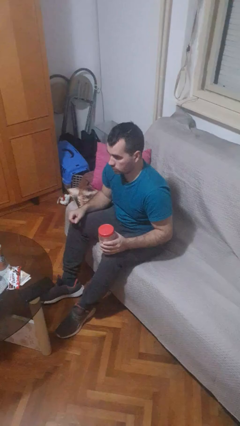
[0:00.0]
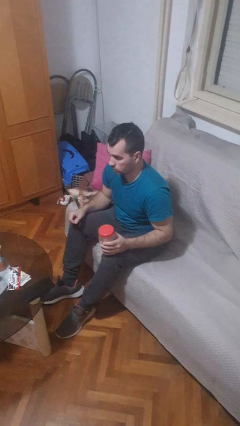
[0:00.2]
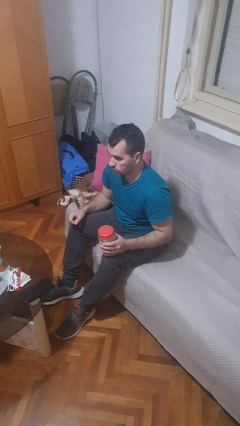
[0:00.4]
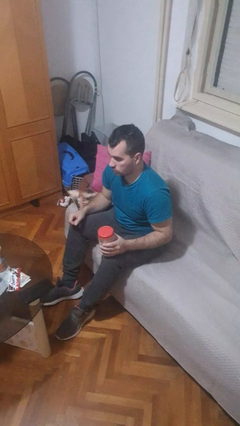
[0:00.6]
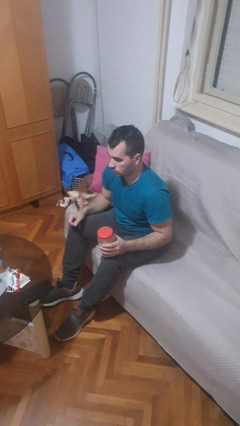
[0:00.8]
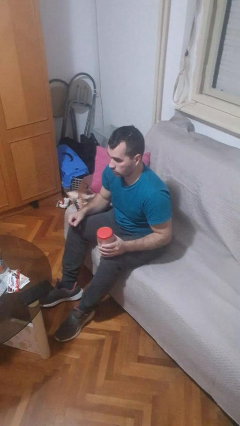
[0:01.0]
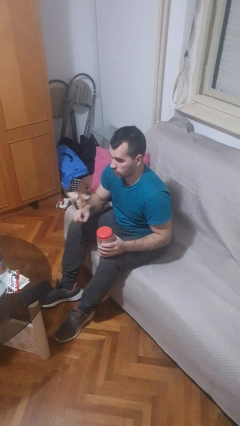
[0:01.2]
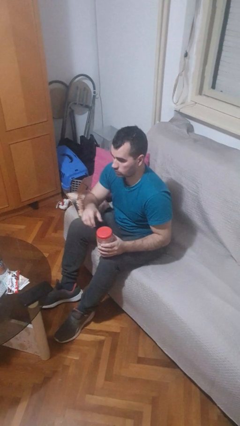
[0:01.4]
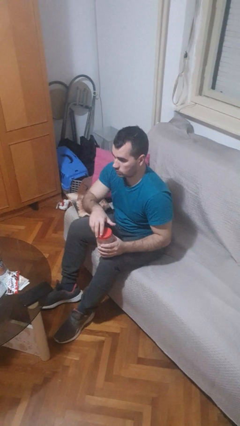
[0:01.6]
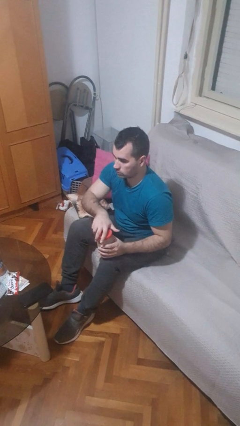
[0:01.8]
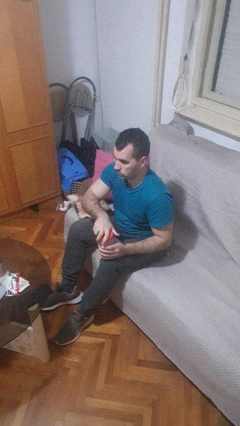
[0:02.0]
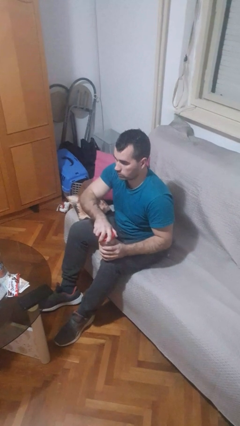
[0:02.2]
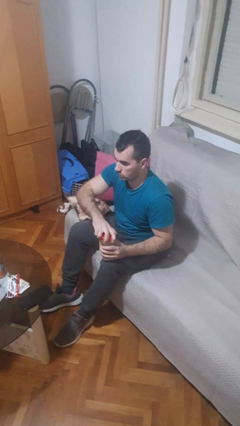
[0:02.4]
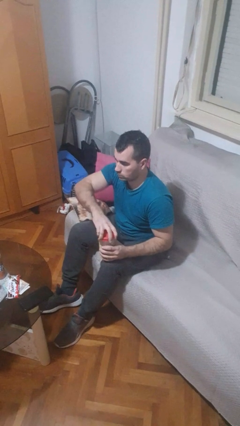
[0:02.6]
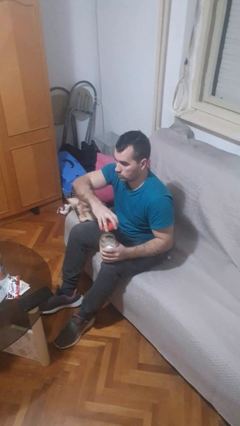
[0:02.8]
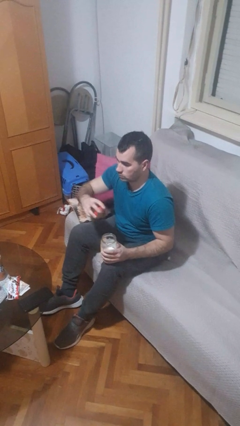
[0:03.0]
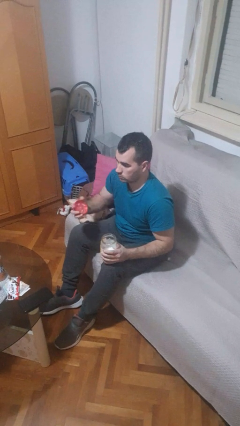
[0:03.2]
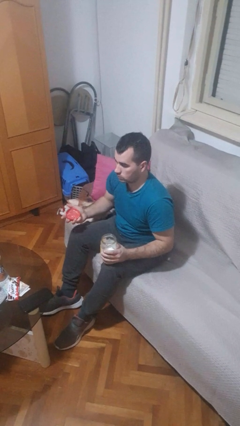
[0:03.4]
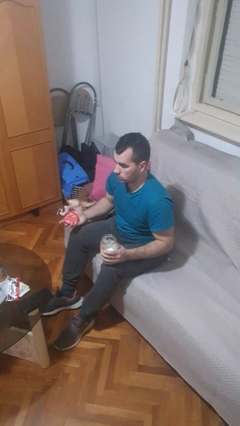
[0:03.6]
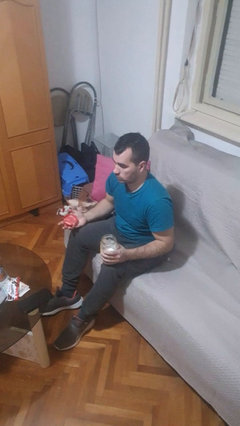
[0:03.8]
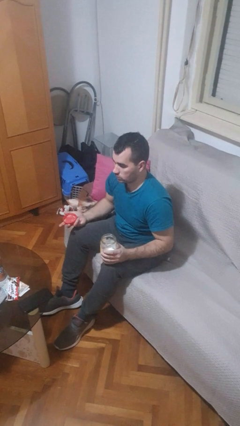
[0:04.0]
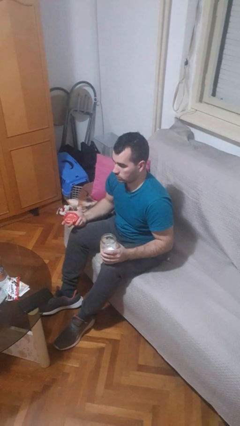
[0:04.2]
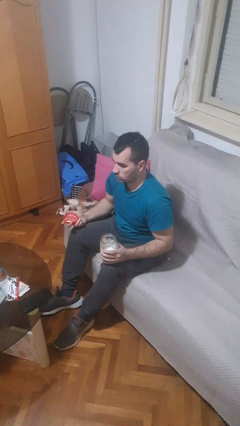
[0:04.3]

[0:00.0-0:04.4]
person opens jar

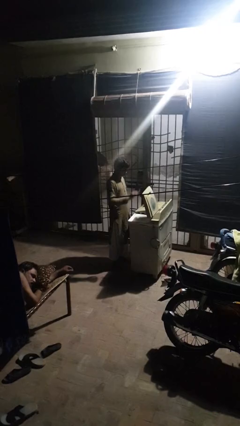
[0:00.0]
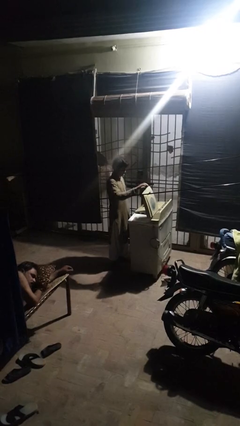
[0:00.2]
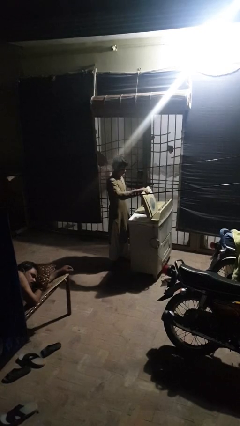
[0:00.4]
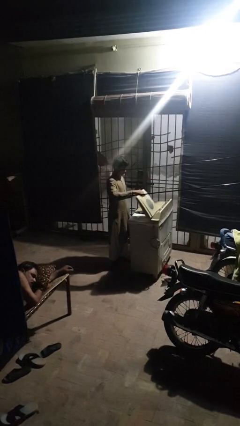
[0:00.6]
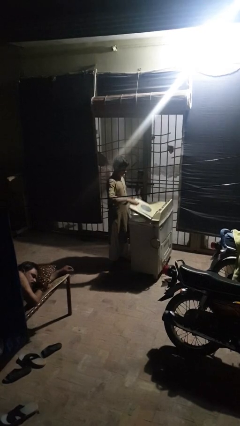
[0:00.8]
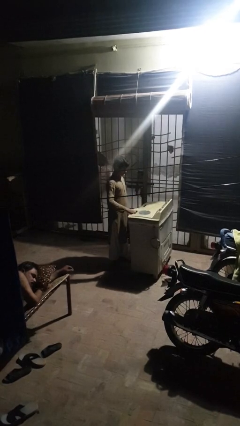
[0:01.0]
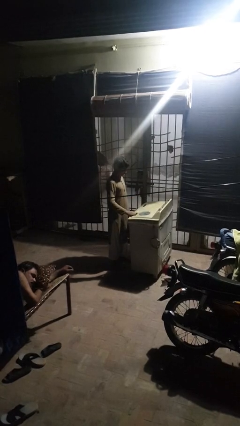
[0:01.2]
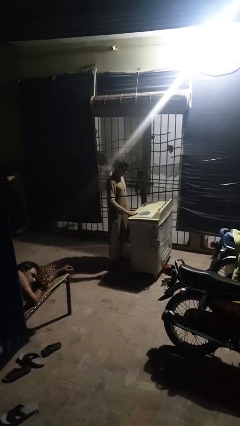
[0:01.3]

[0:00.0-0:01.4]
person closes clothes washer

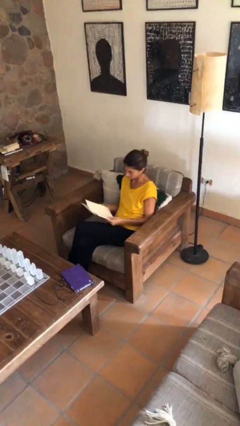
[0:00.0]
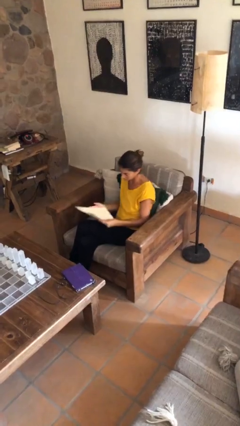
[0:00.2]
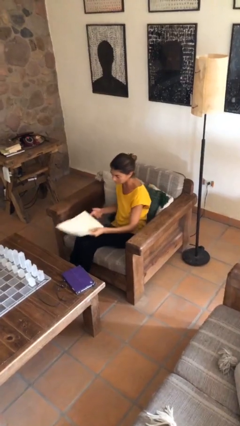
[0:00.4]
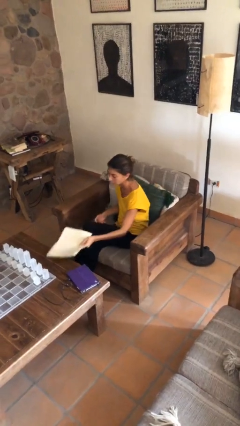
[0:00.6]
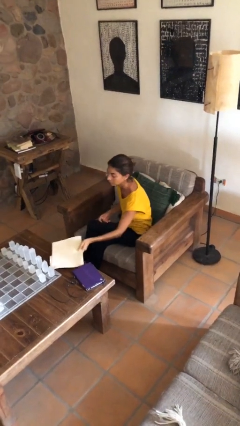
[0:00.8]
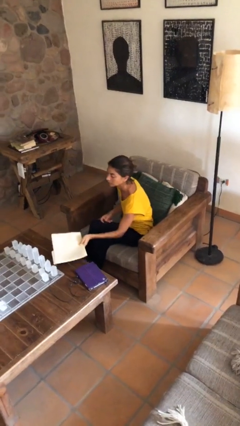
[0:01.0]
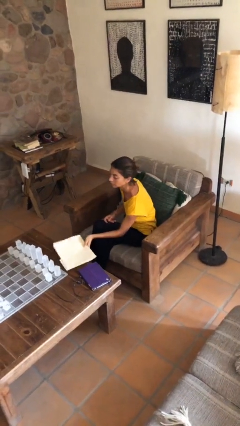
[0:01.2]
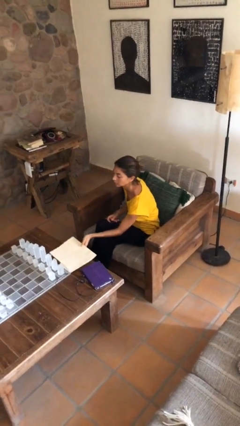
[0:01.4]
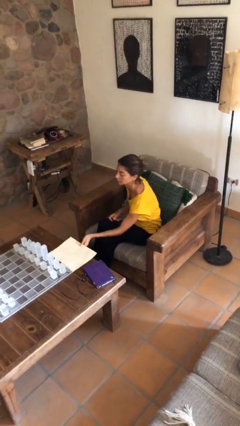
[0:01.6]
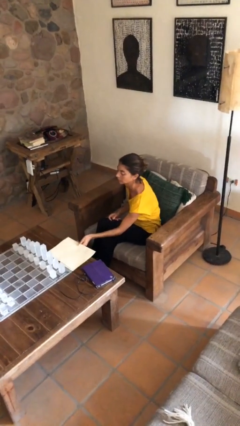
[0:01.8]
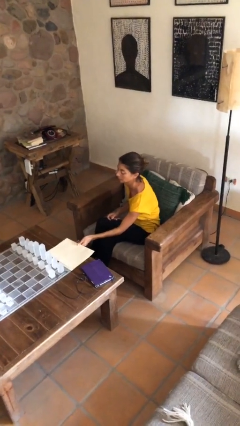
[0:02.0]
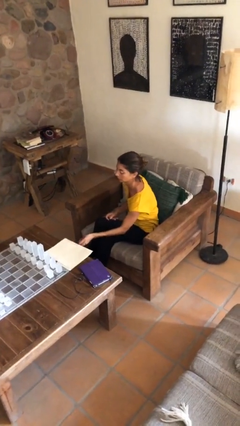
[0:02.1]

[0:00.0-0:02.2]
person puts down object on table

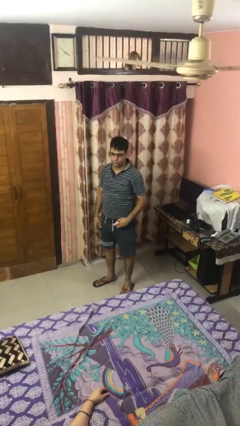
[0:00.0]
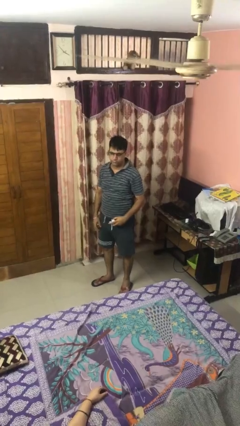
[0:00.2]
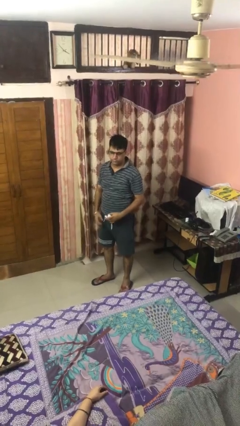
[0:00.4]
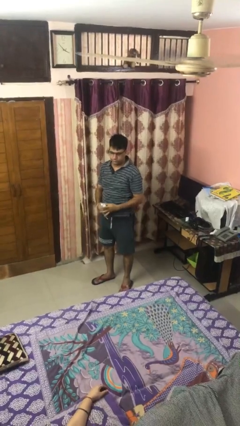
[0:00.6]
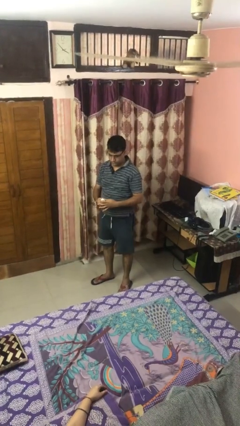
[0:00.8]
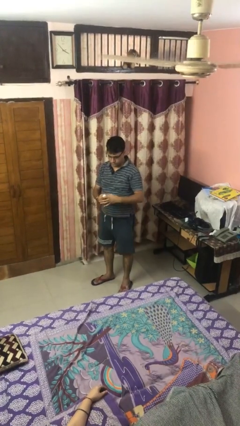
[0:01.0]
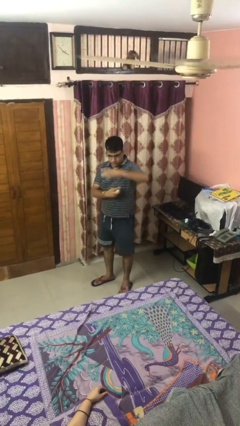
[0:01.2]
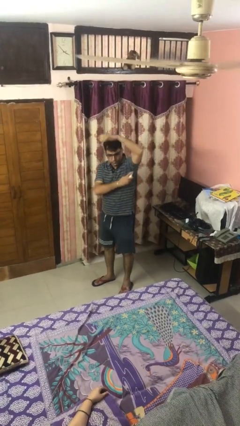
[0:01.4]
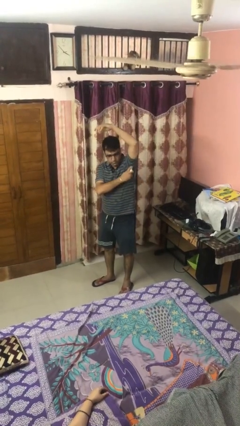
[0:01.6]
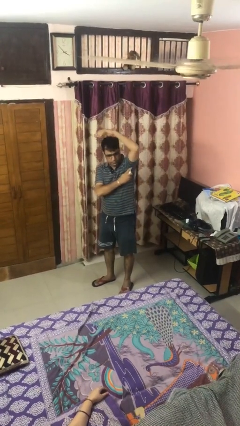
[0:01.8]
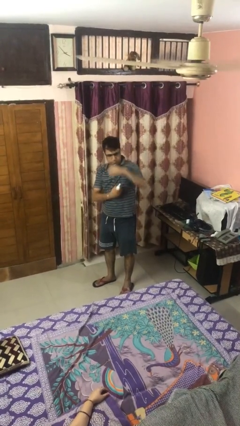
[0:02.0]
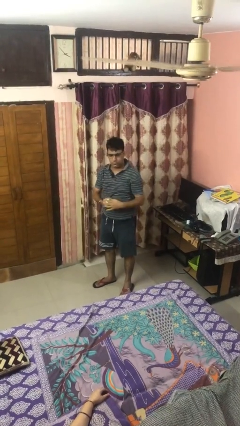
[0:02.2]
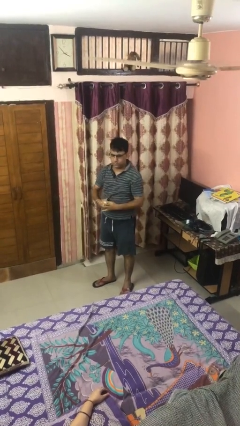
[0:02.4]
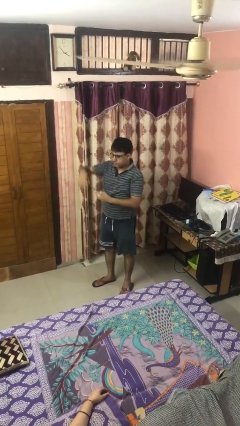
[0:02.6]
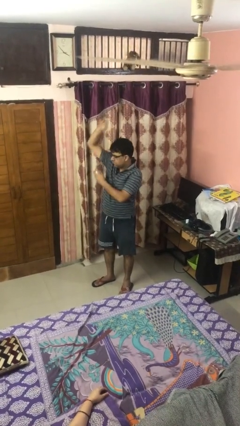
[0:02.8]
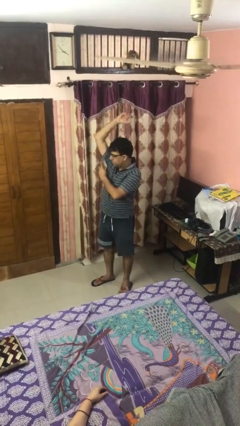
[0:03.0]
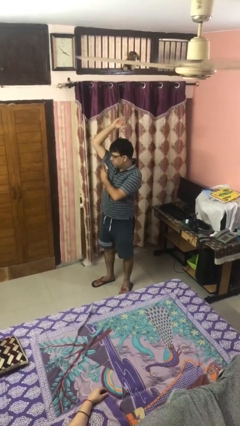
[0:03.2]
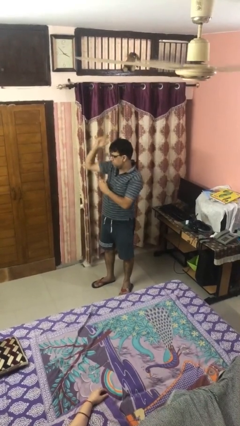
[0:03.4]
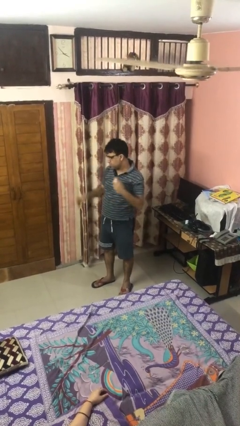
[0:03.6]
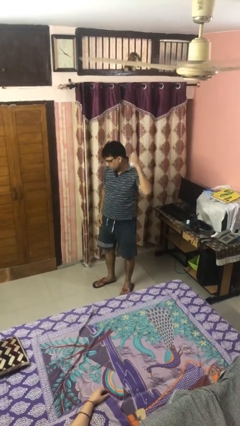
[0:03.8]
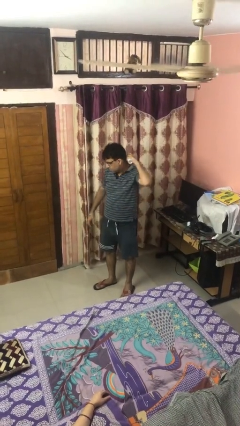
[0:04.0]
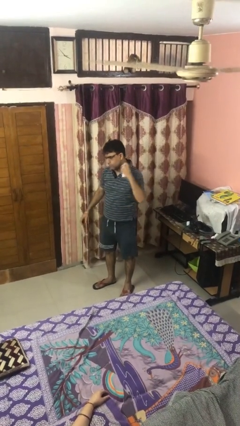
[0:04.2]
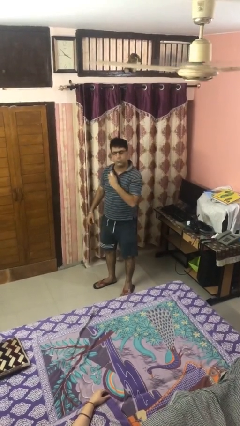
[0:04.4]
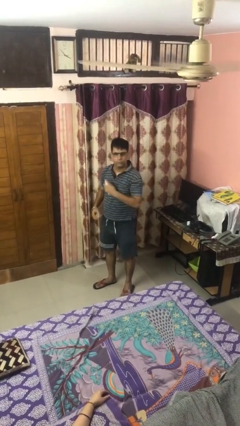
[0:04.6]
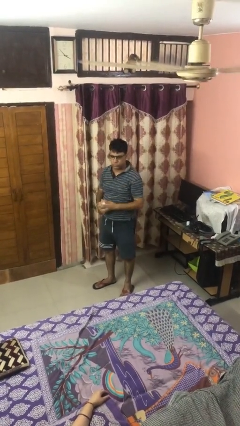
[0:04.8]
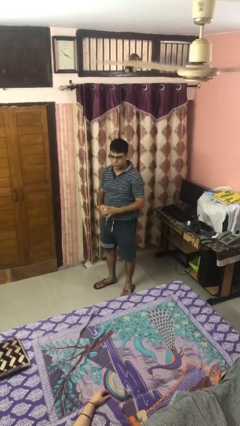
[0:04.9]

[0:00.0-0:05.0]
person applies deodorant

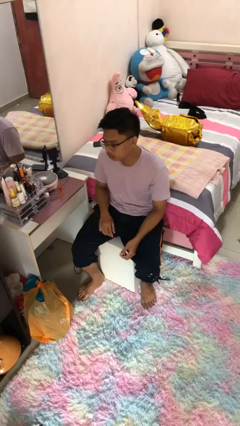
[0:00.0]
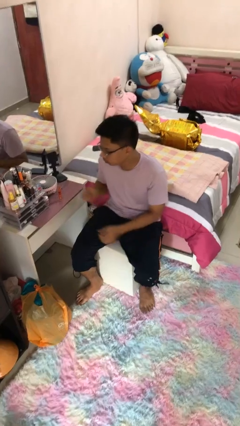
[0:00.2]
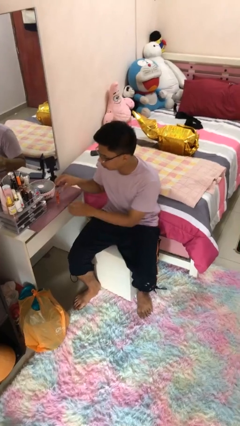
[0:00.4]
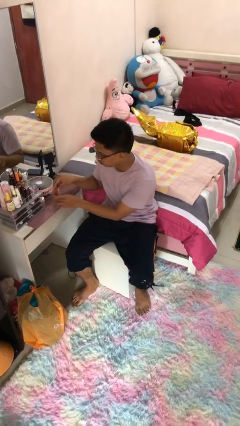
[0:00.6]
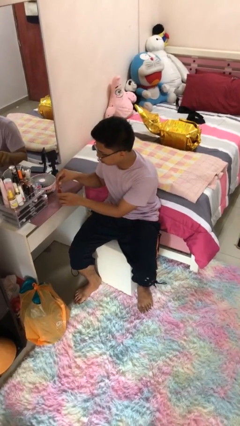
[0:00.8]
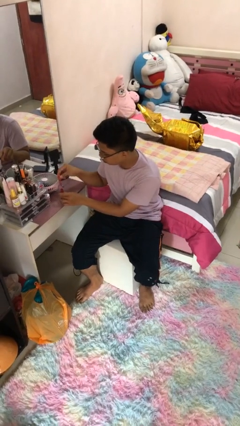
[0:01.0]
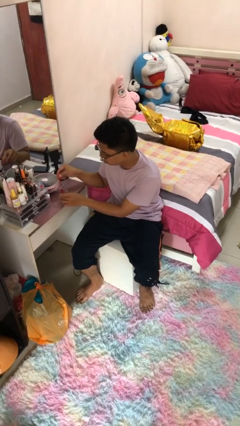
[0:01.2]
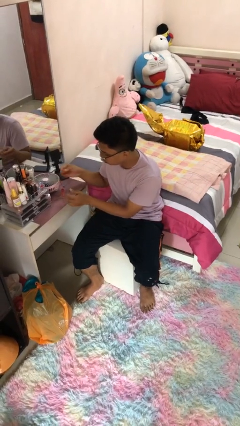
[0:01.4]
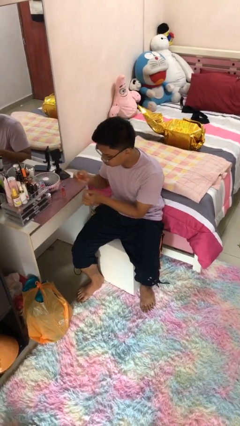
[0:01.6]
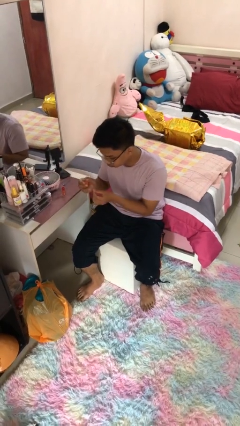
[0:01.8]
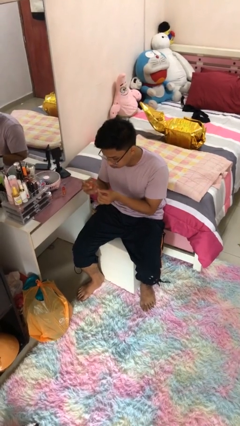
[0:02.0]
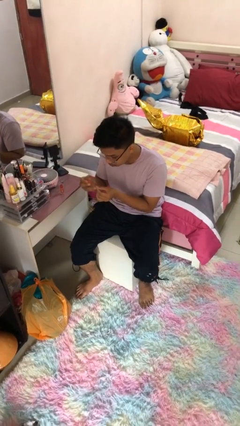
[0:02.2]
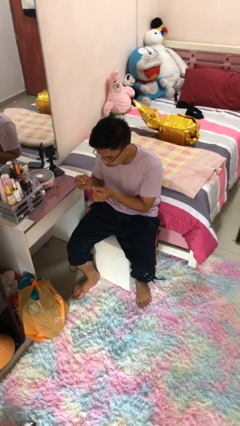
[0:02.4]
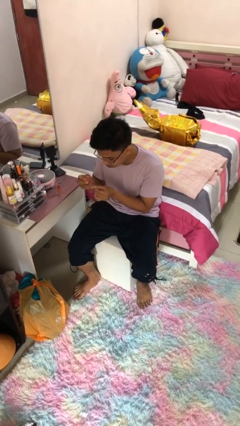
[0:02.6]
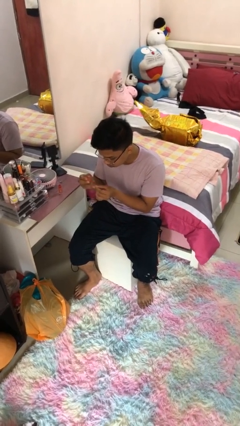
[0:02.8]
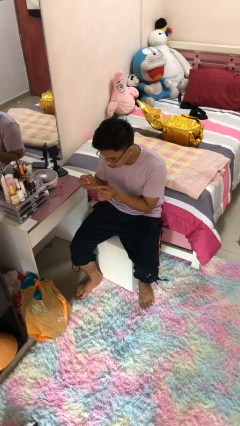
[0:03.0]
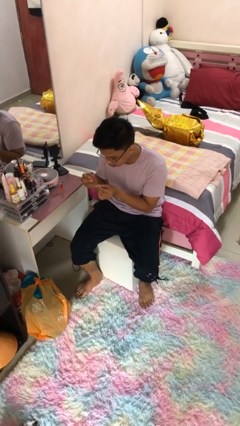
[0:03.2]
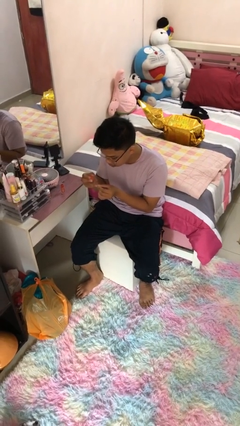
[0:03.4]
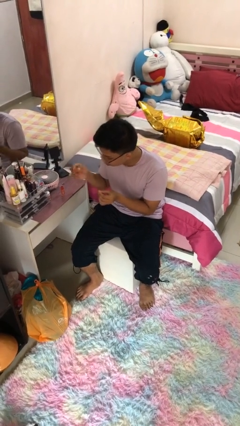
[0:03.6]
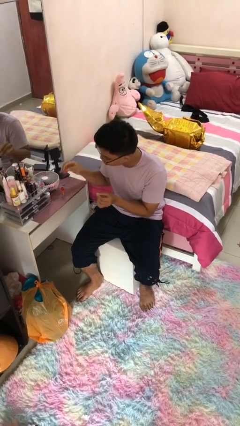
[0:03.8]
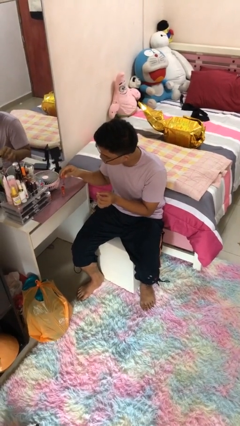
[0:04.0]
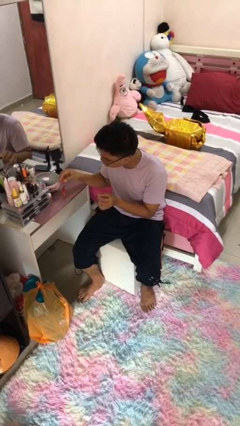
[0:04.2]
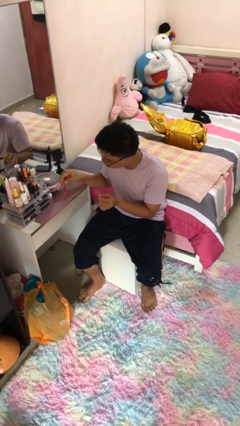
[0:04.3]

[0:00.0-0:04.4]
person paints fingernails

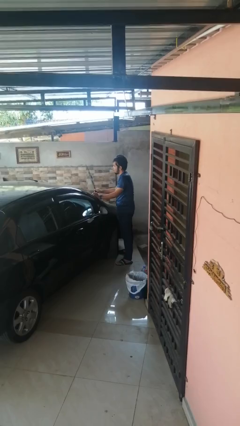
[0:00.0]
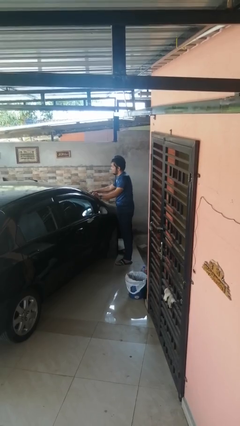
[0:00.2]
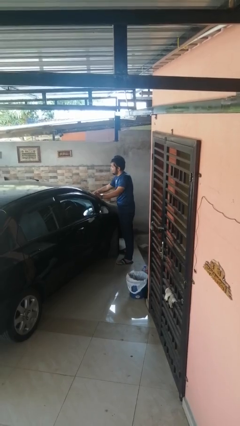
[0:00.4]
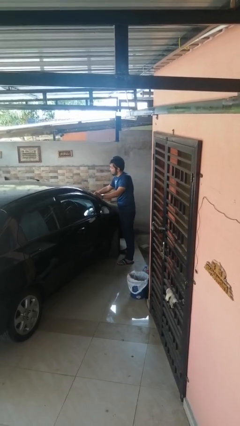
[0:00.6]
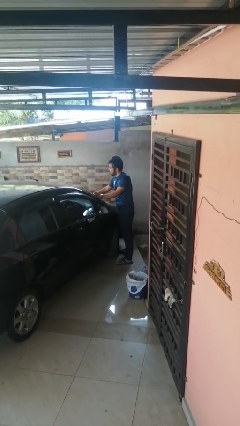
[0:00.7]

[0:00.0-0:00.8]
person flips down car wipers
